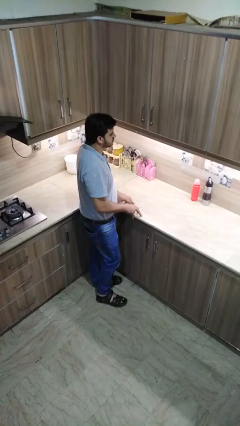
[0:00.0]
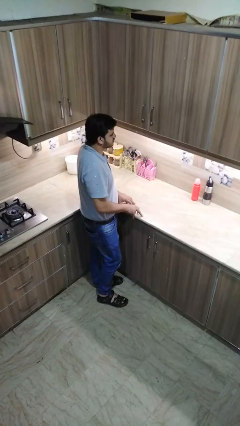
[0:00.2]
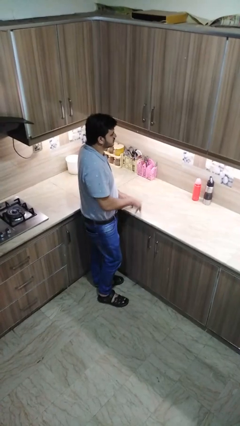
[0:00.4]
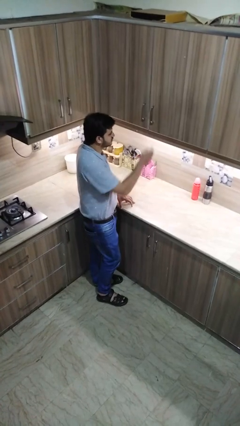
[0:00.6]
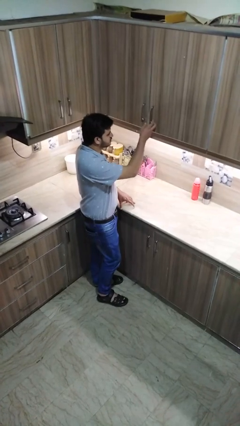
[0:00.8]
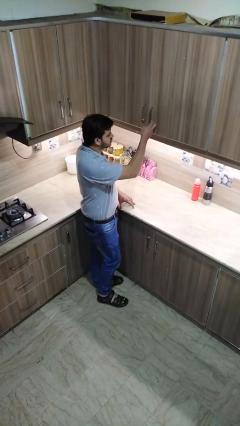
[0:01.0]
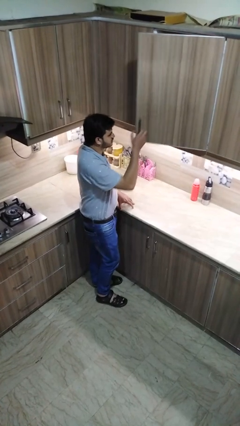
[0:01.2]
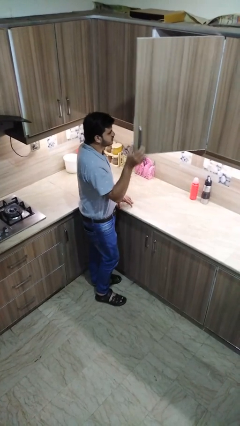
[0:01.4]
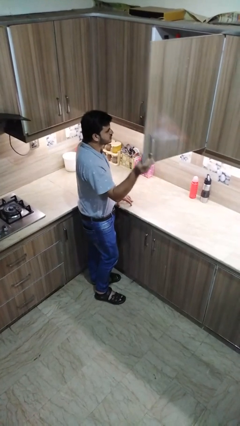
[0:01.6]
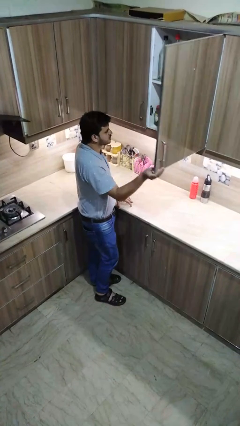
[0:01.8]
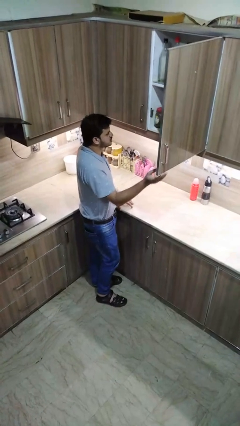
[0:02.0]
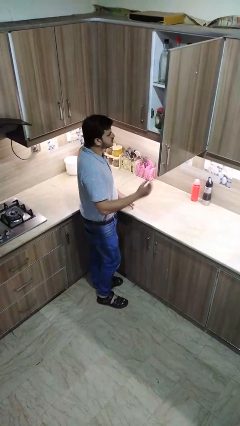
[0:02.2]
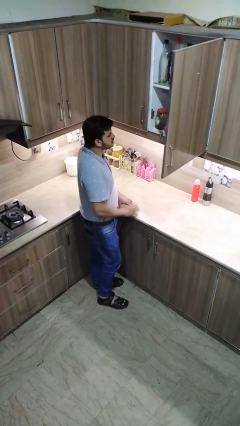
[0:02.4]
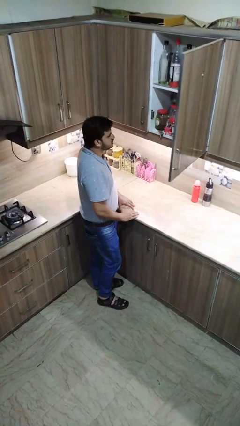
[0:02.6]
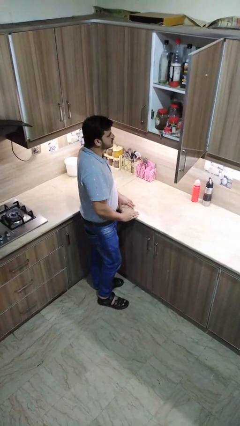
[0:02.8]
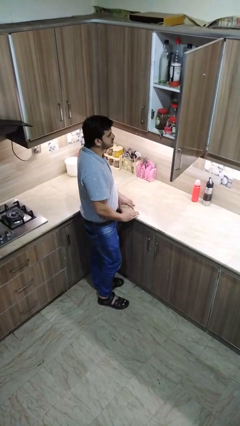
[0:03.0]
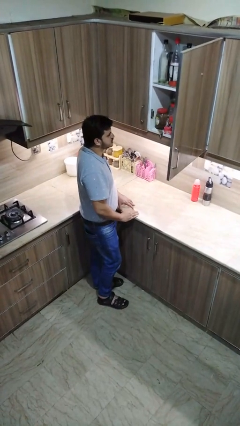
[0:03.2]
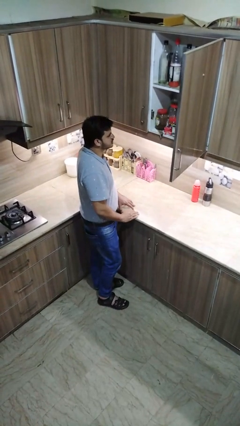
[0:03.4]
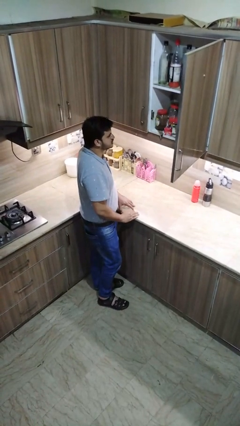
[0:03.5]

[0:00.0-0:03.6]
person opens cabinet

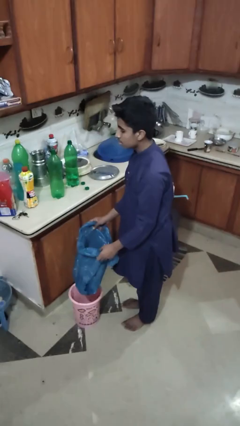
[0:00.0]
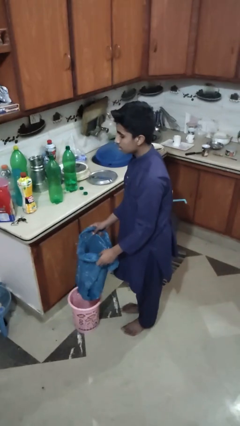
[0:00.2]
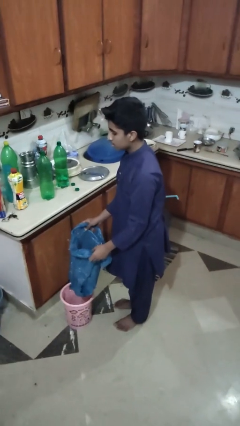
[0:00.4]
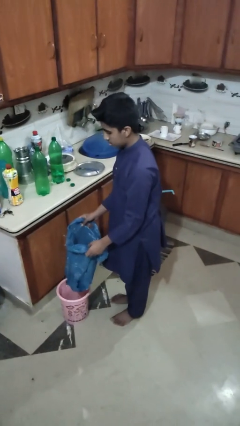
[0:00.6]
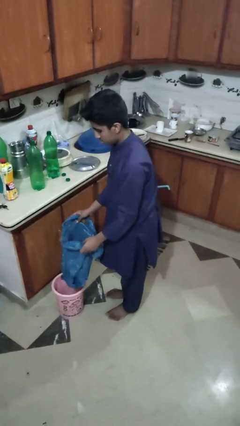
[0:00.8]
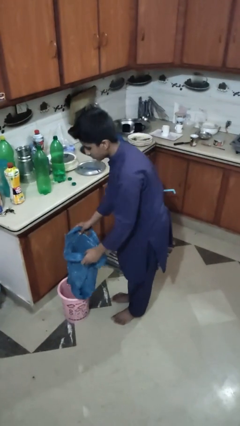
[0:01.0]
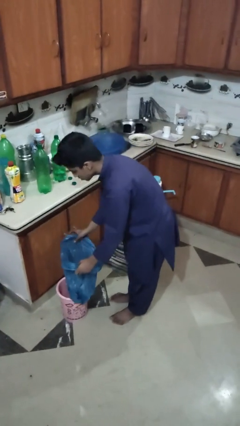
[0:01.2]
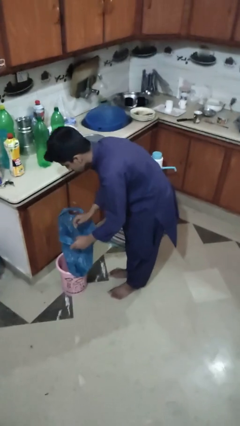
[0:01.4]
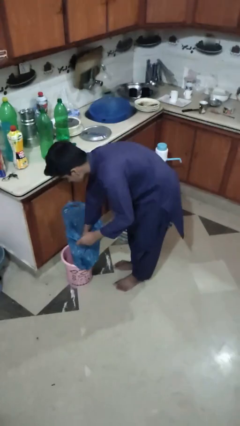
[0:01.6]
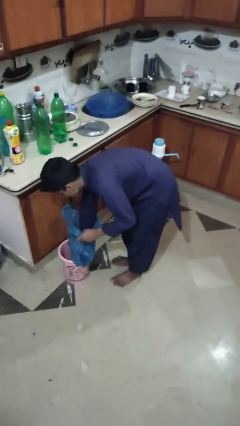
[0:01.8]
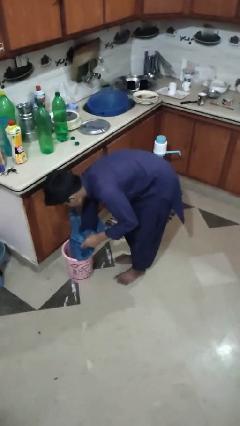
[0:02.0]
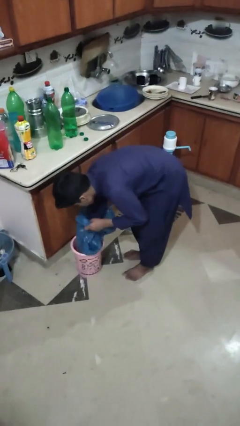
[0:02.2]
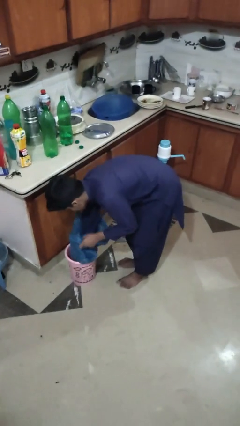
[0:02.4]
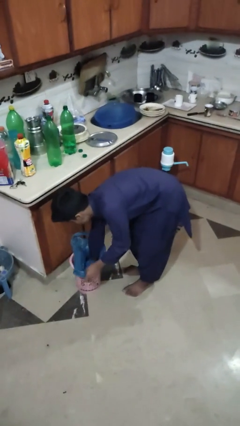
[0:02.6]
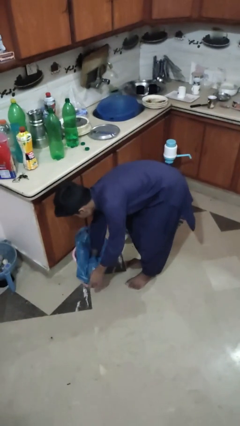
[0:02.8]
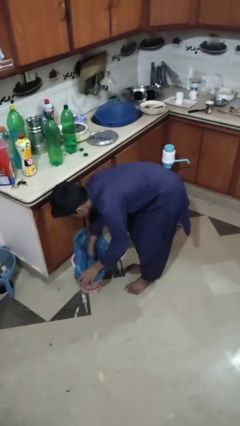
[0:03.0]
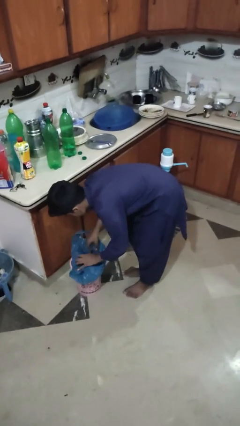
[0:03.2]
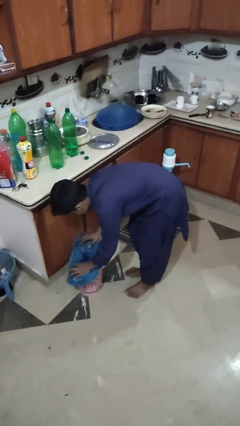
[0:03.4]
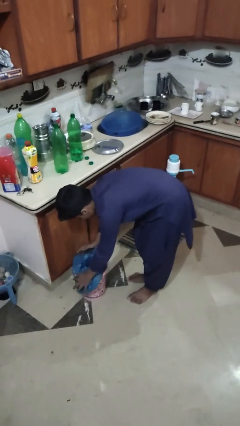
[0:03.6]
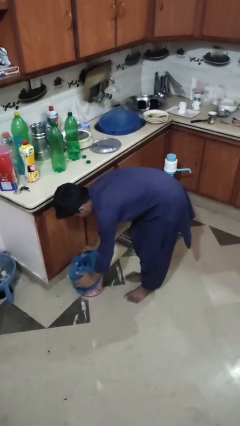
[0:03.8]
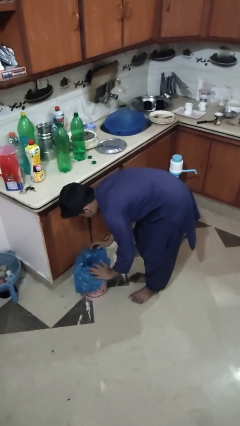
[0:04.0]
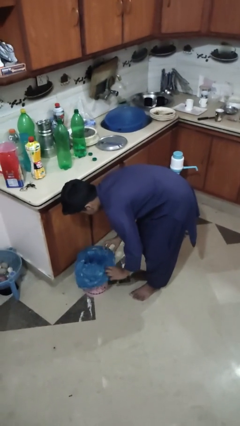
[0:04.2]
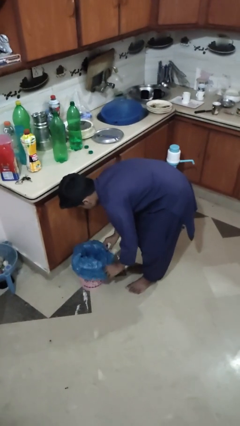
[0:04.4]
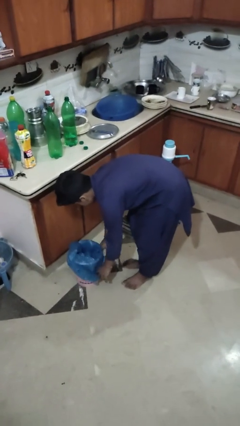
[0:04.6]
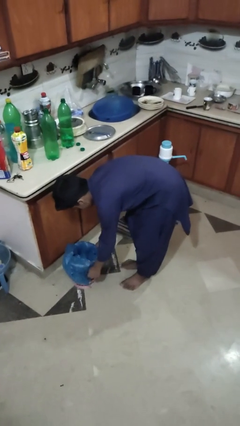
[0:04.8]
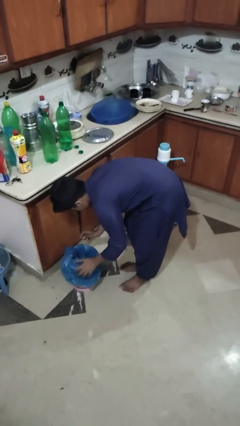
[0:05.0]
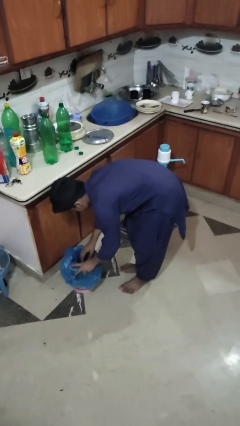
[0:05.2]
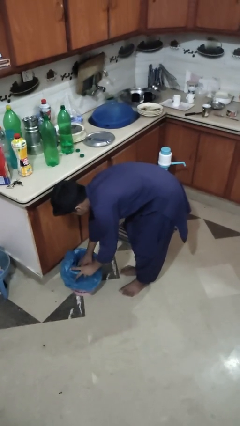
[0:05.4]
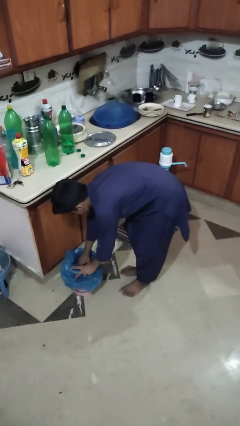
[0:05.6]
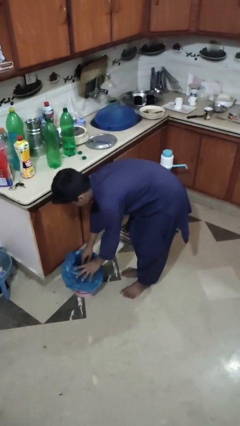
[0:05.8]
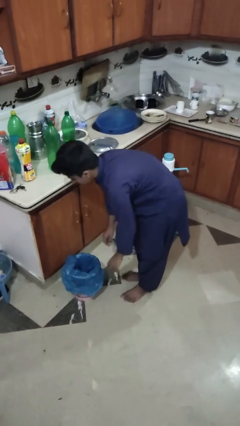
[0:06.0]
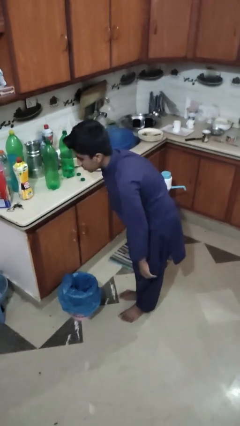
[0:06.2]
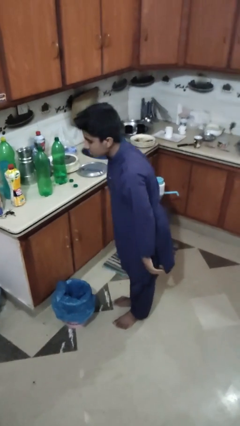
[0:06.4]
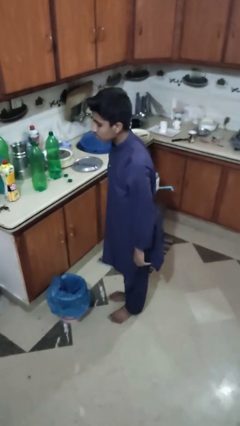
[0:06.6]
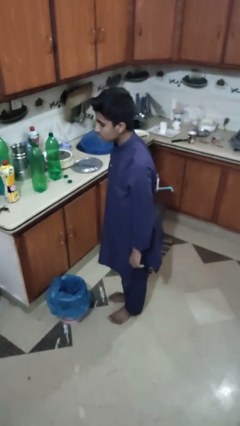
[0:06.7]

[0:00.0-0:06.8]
person inserts trashbag into trashcan

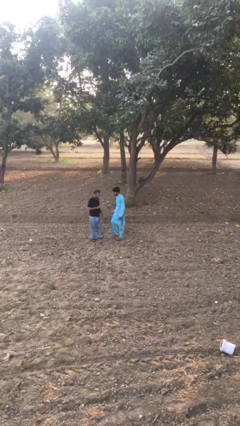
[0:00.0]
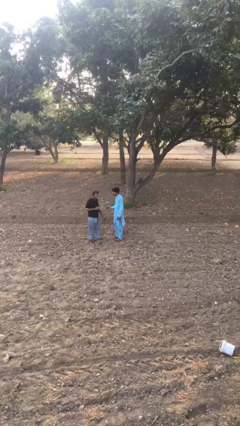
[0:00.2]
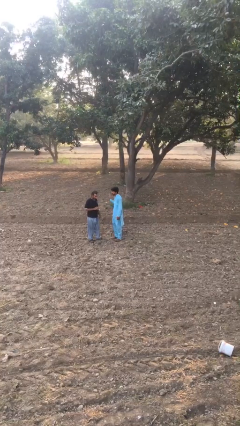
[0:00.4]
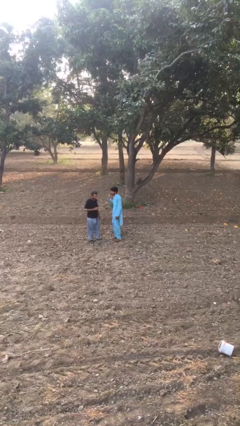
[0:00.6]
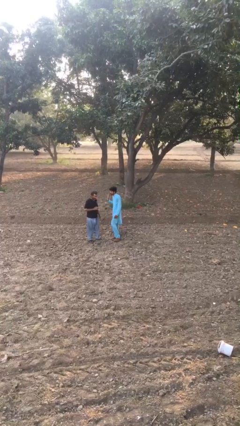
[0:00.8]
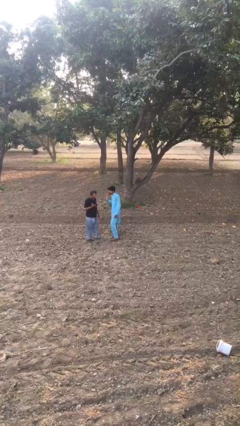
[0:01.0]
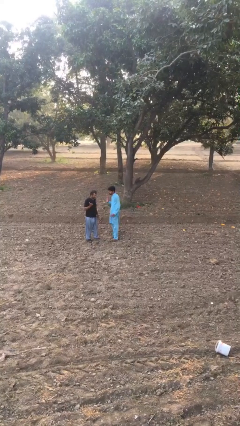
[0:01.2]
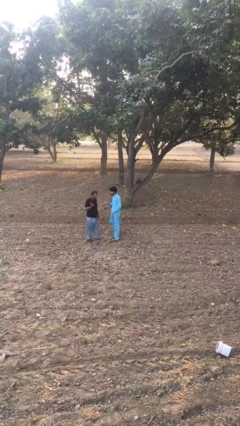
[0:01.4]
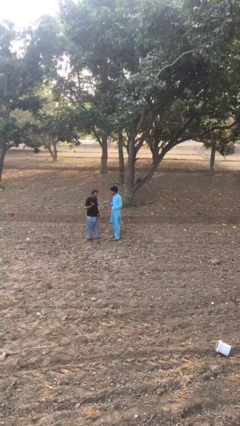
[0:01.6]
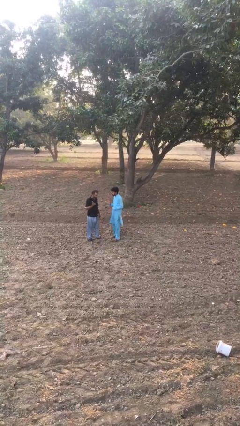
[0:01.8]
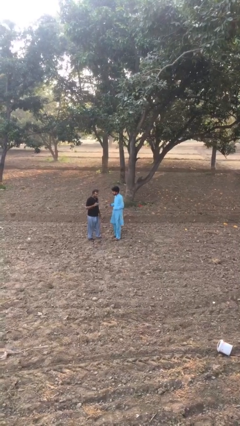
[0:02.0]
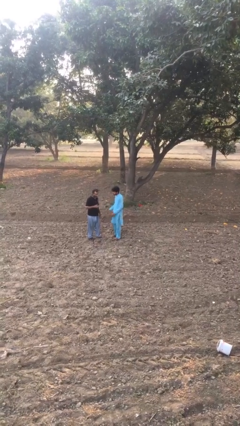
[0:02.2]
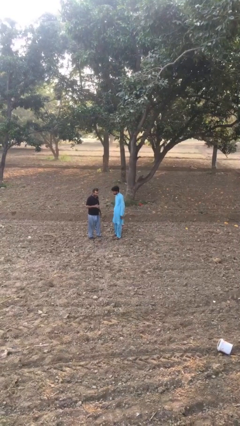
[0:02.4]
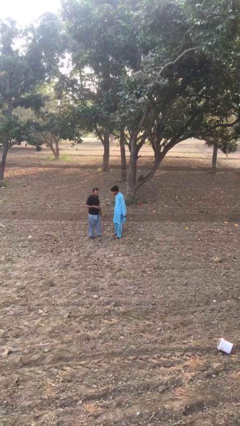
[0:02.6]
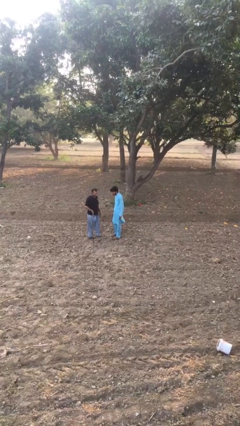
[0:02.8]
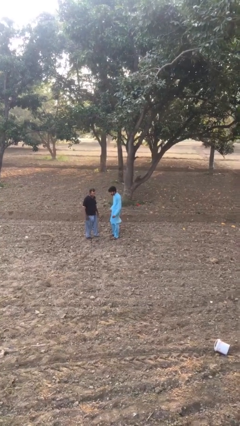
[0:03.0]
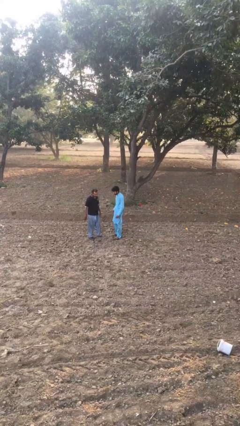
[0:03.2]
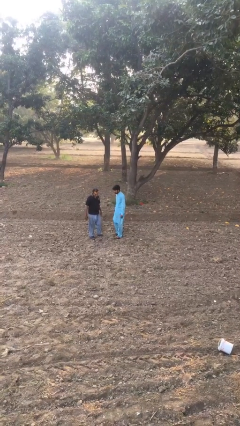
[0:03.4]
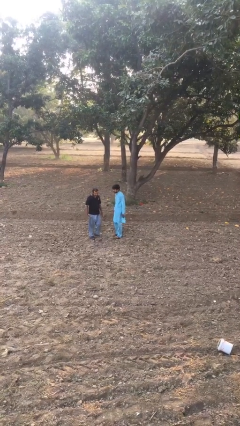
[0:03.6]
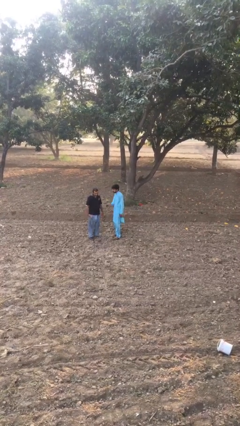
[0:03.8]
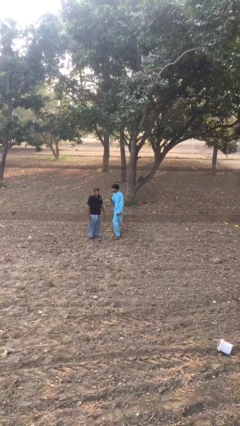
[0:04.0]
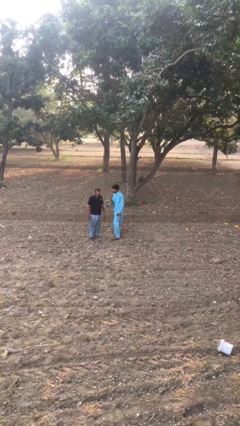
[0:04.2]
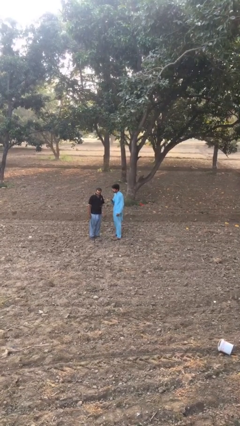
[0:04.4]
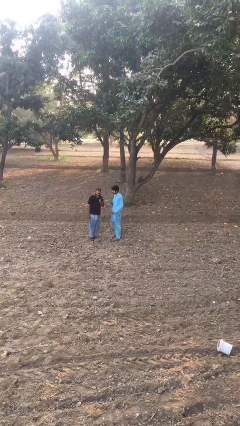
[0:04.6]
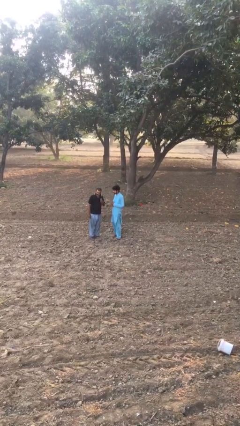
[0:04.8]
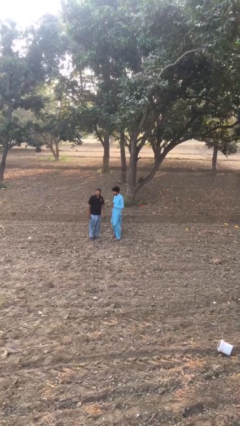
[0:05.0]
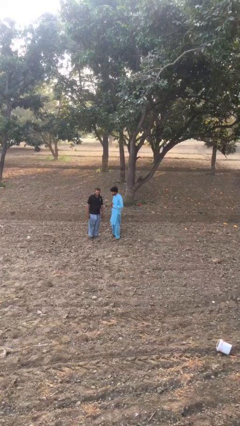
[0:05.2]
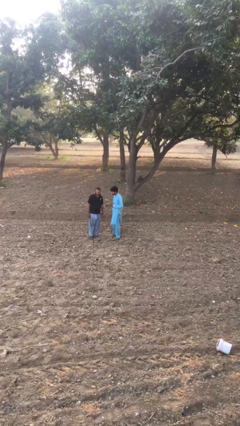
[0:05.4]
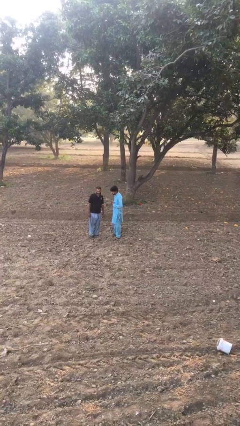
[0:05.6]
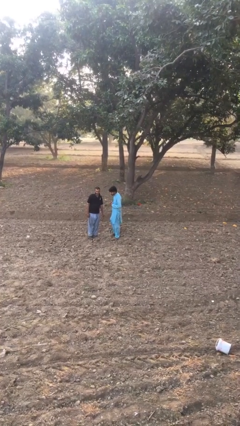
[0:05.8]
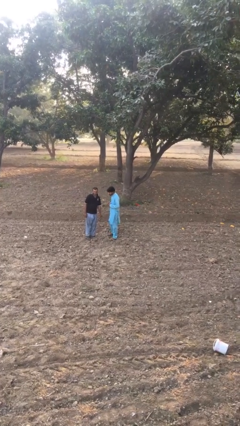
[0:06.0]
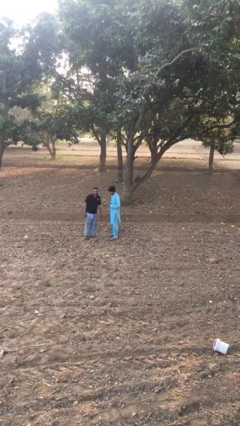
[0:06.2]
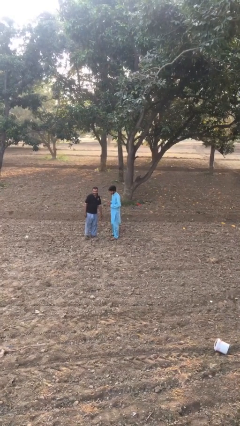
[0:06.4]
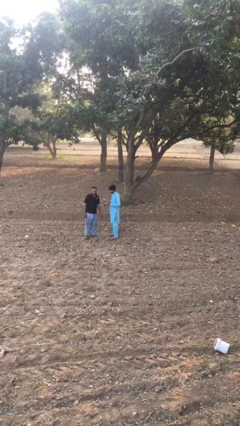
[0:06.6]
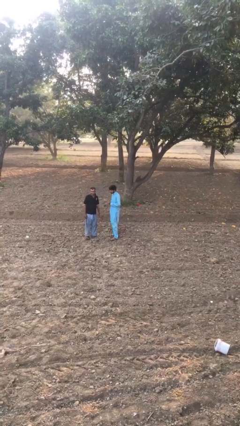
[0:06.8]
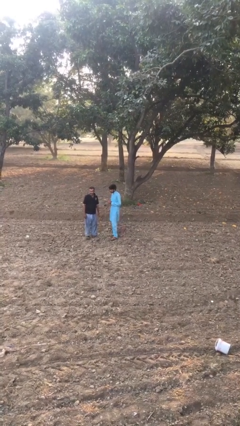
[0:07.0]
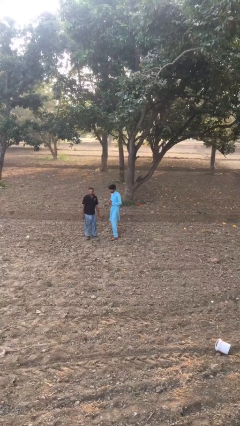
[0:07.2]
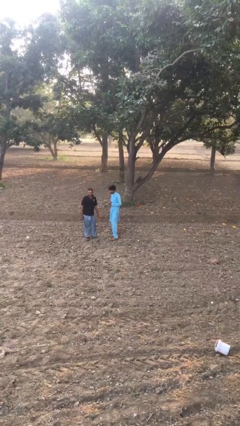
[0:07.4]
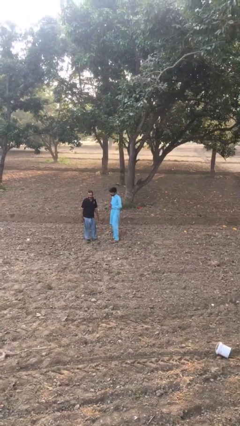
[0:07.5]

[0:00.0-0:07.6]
person talks to person
